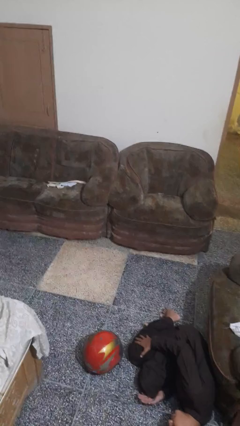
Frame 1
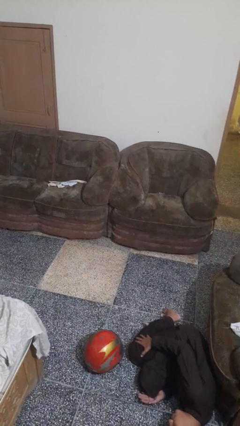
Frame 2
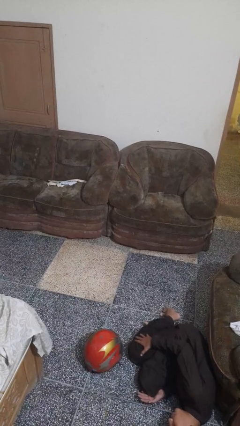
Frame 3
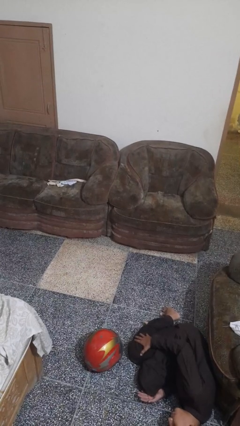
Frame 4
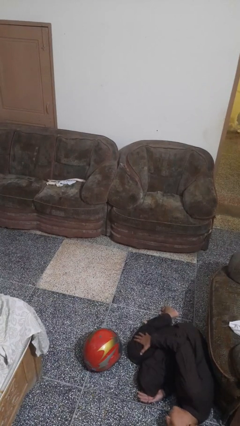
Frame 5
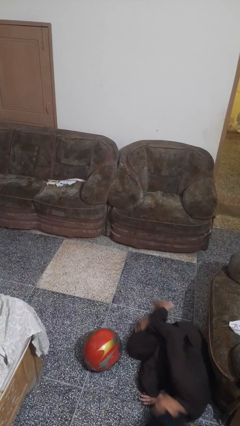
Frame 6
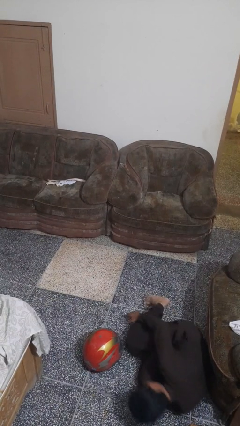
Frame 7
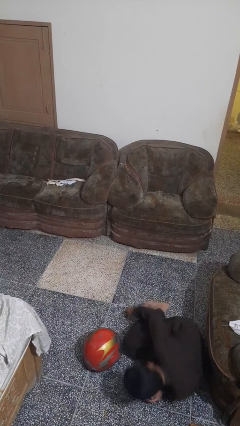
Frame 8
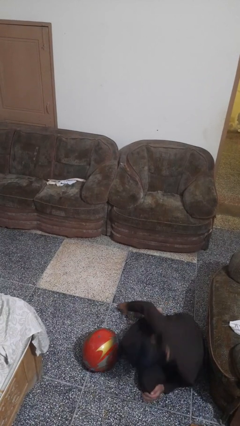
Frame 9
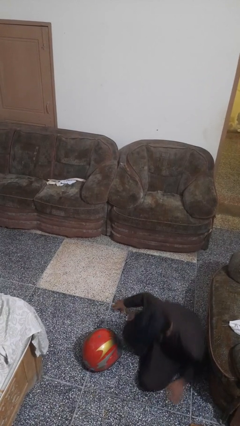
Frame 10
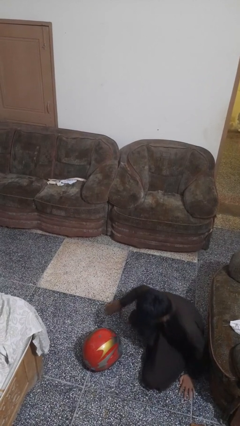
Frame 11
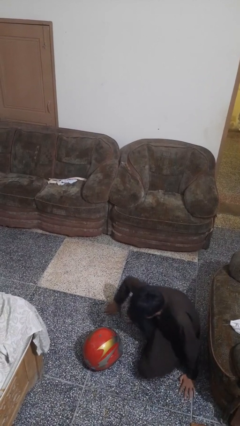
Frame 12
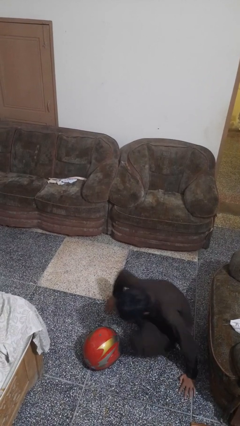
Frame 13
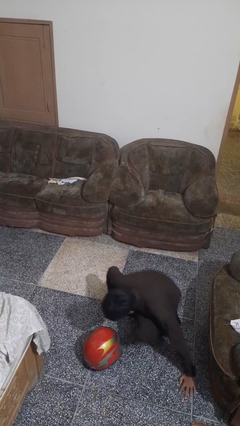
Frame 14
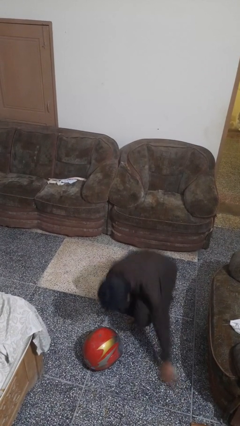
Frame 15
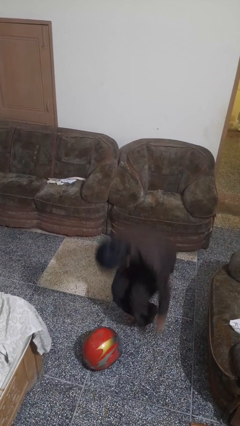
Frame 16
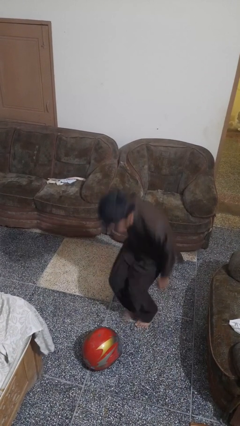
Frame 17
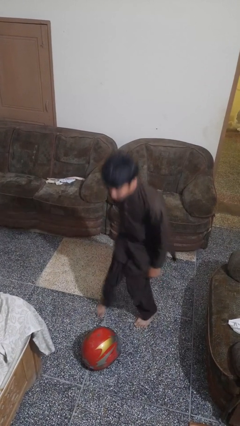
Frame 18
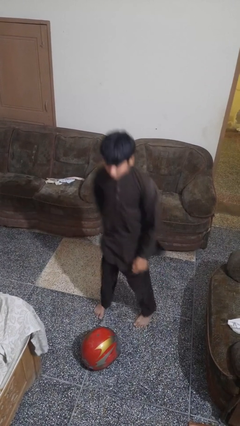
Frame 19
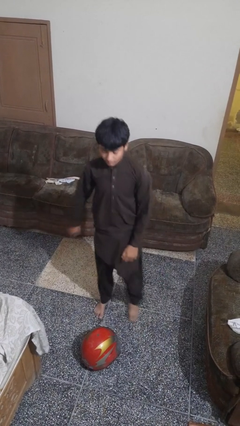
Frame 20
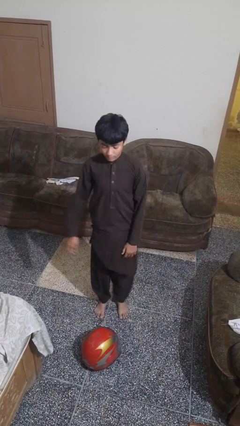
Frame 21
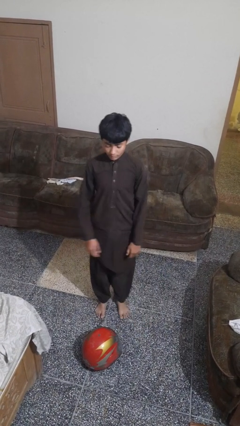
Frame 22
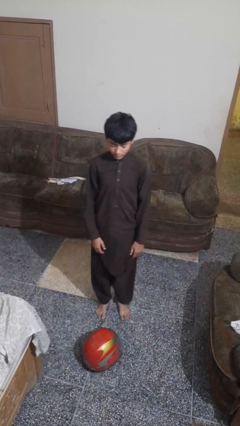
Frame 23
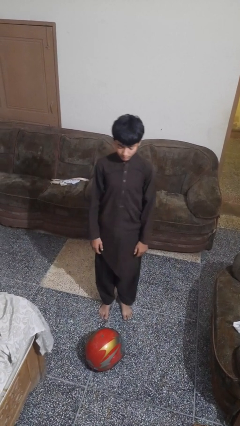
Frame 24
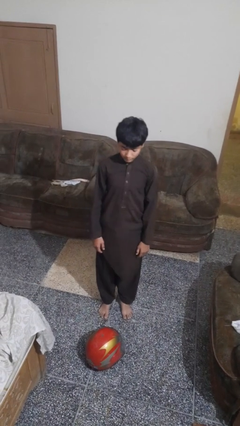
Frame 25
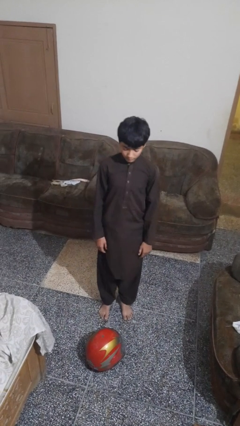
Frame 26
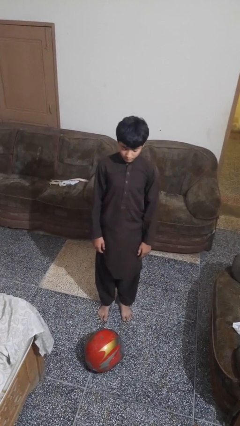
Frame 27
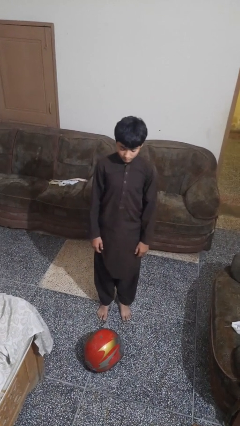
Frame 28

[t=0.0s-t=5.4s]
person stands up from floor

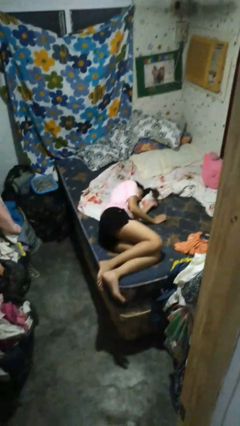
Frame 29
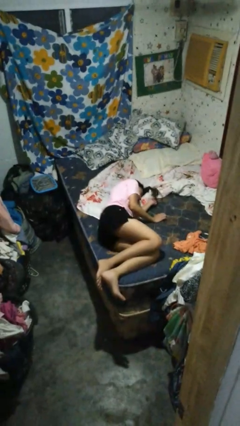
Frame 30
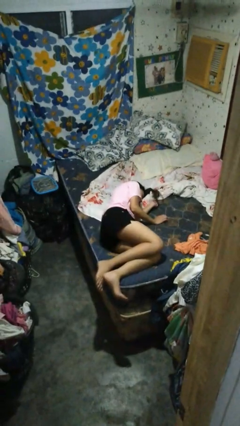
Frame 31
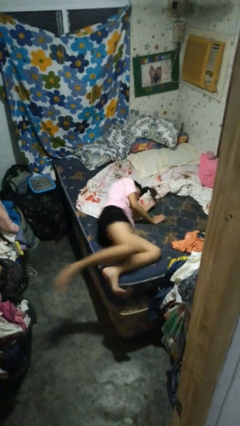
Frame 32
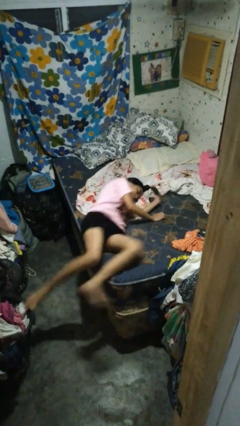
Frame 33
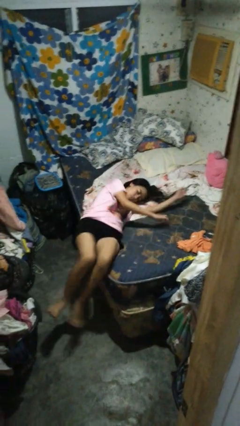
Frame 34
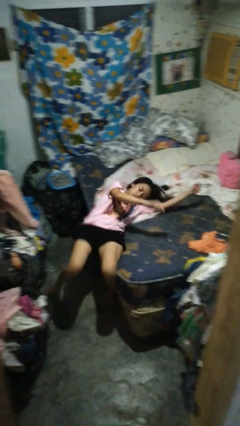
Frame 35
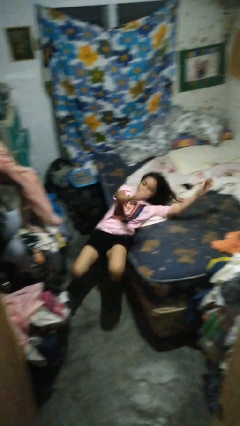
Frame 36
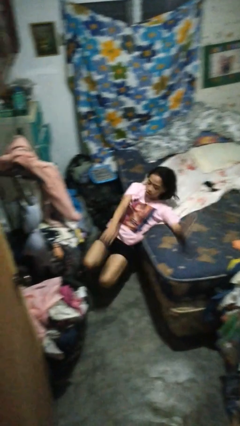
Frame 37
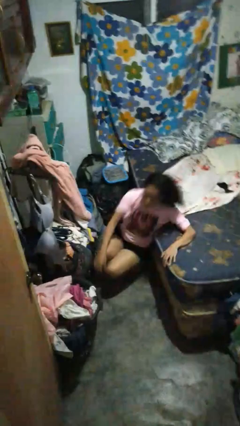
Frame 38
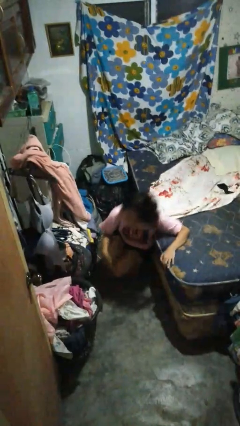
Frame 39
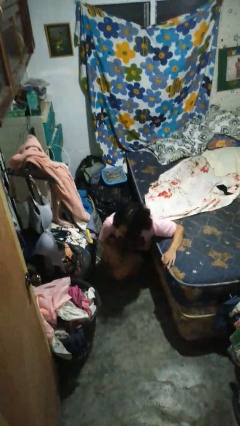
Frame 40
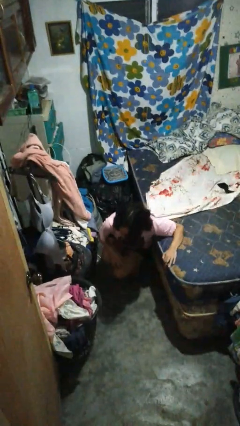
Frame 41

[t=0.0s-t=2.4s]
person falls from bed

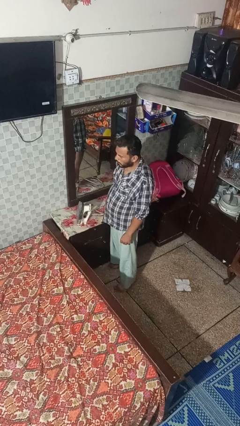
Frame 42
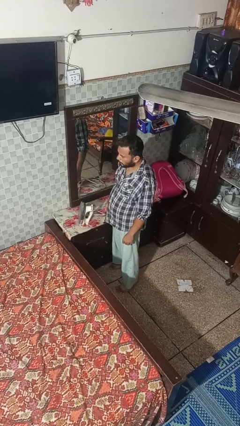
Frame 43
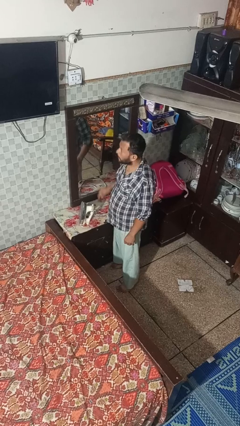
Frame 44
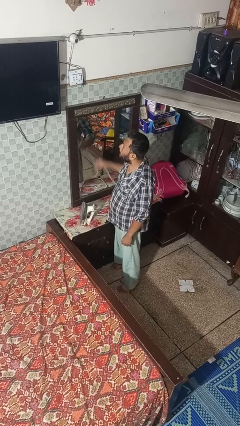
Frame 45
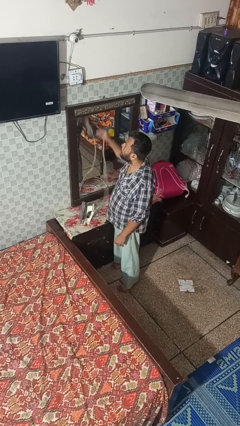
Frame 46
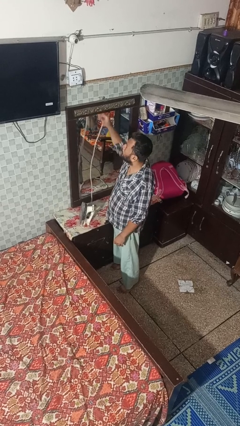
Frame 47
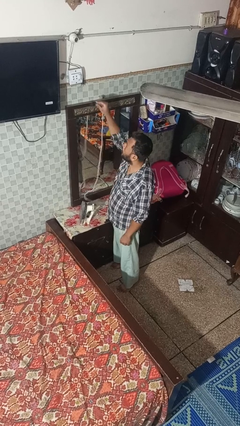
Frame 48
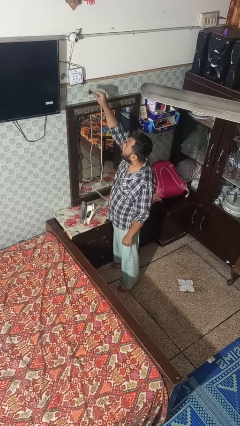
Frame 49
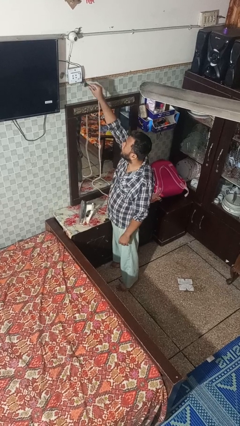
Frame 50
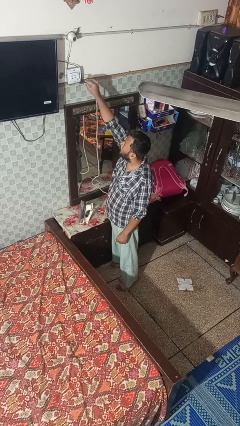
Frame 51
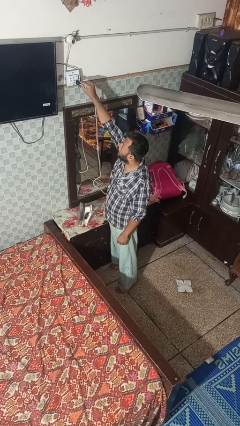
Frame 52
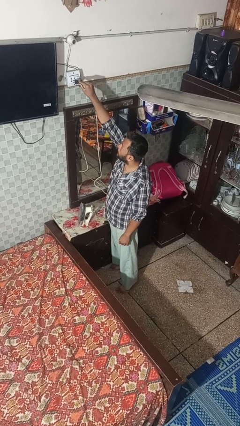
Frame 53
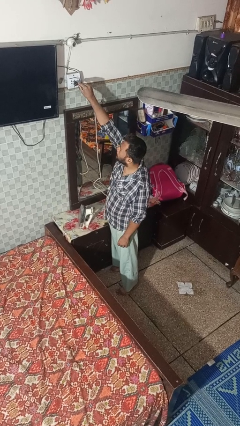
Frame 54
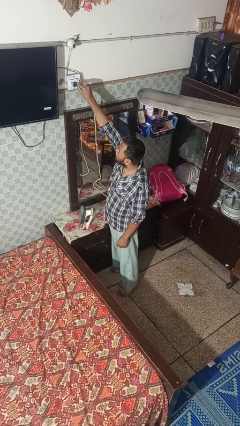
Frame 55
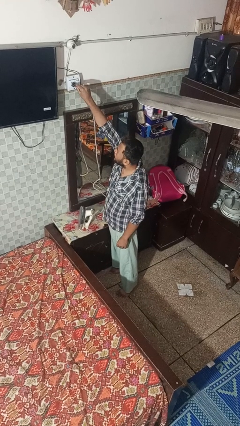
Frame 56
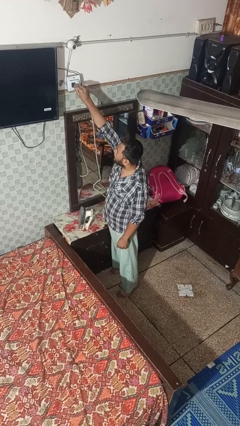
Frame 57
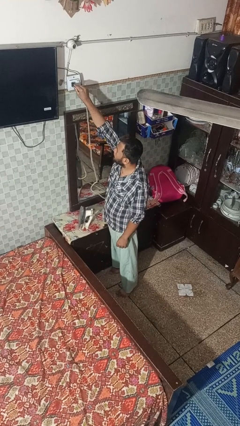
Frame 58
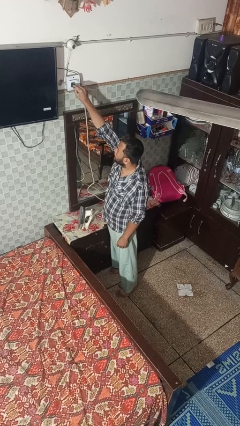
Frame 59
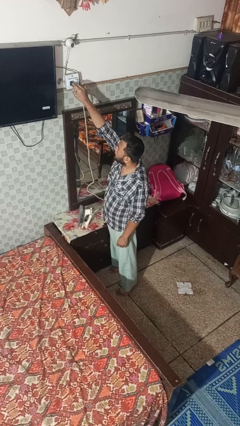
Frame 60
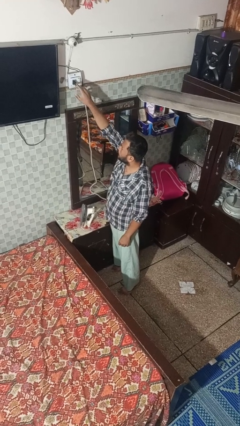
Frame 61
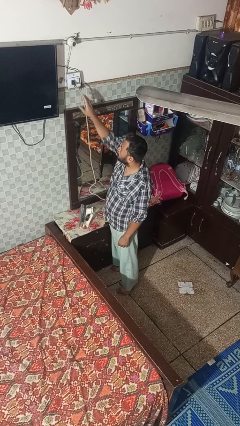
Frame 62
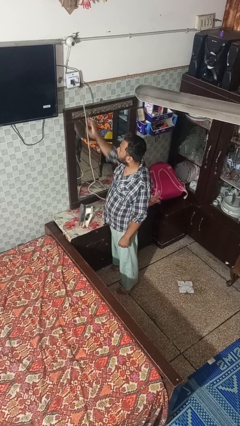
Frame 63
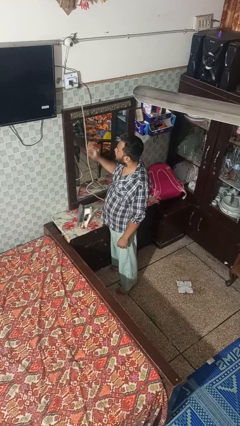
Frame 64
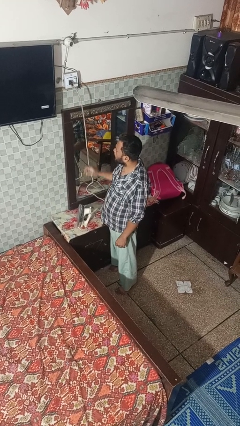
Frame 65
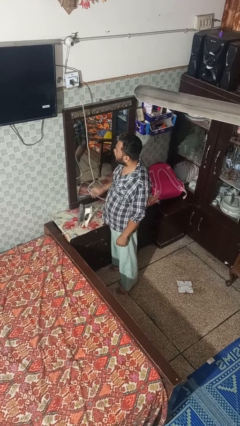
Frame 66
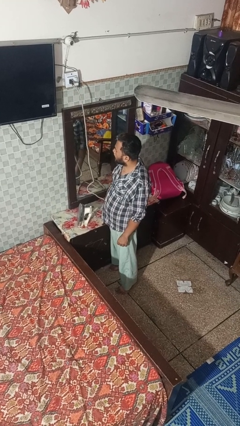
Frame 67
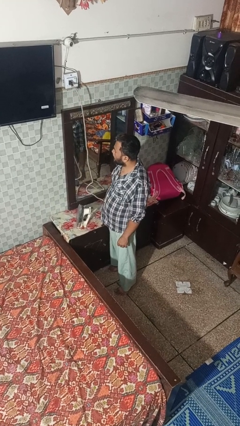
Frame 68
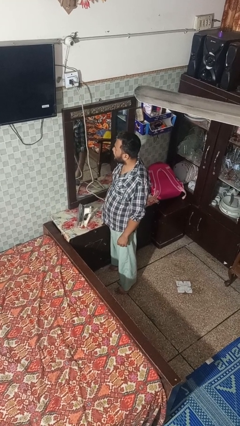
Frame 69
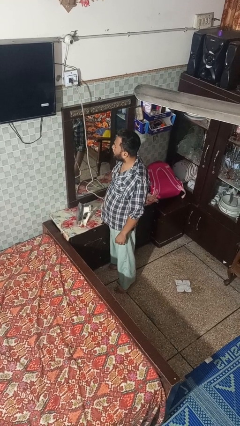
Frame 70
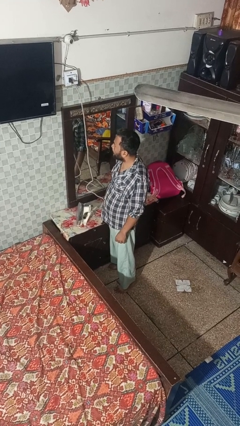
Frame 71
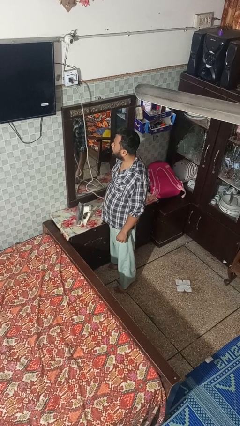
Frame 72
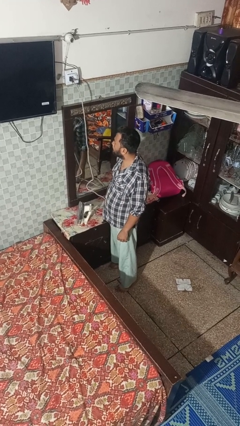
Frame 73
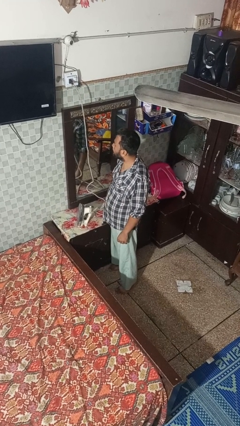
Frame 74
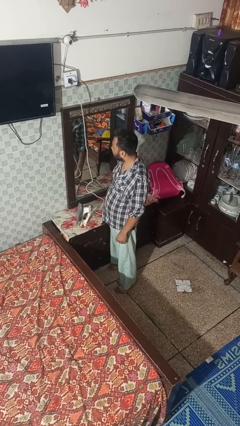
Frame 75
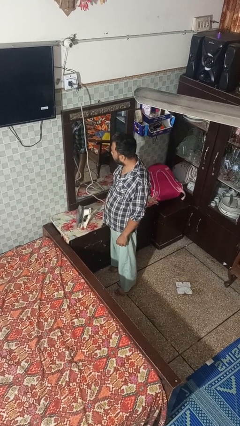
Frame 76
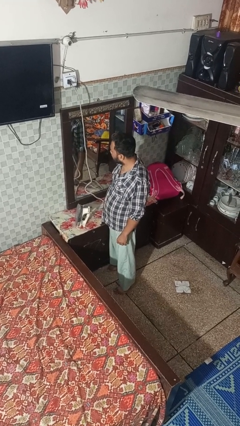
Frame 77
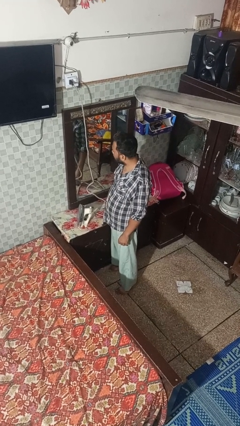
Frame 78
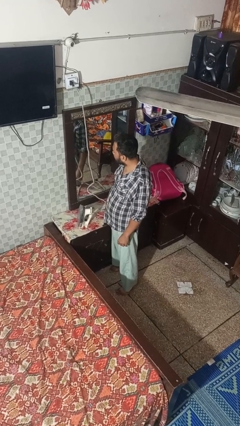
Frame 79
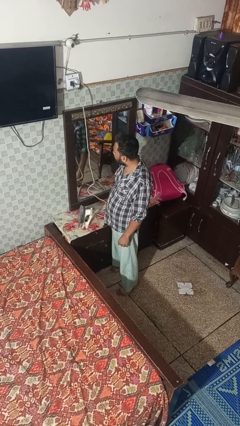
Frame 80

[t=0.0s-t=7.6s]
person plugs into electrical socket

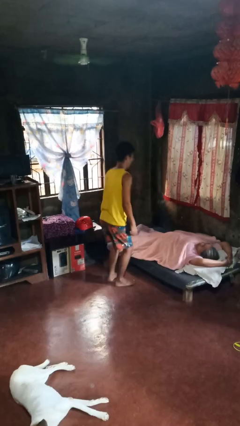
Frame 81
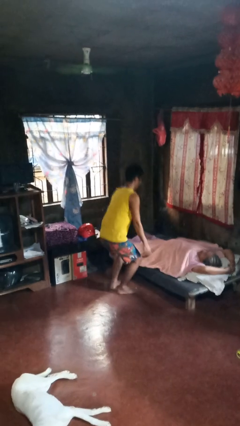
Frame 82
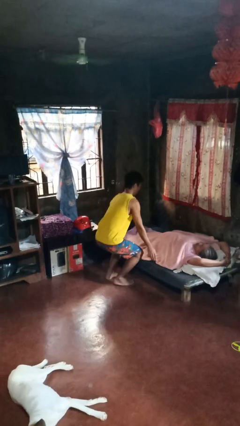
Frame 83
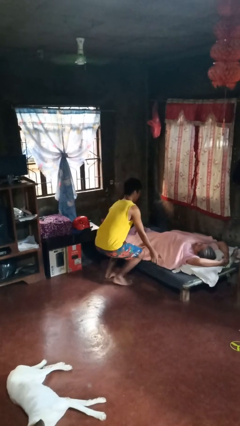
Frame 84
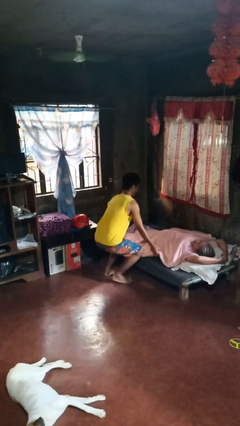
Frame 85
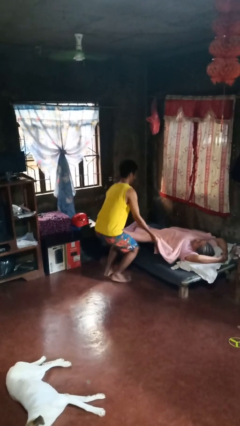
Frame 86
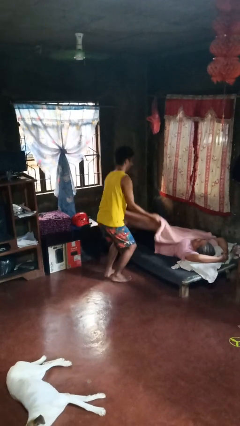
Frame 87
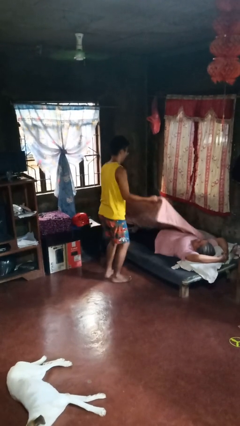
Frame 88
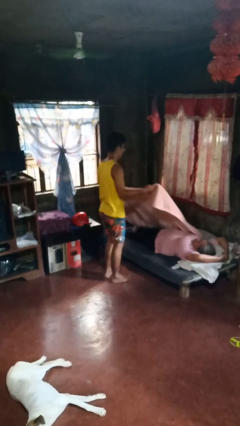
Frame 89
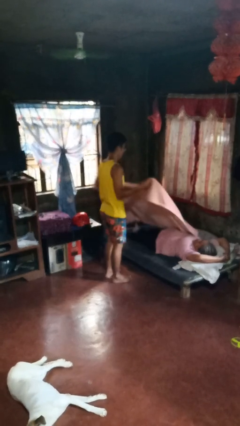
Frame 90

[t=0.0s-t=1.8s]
person uncovers friend with blanket

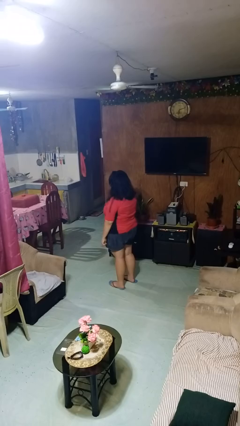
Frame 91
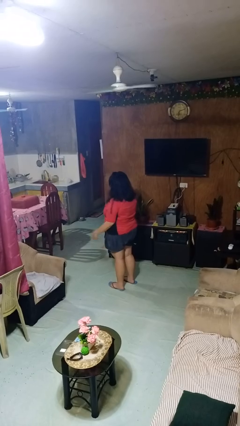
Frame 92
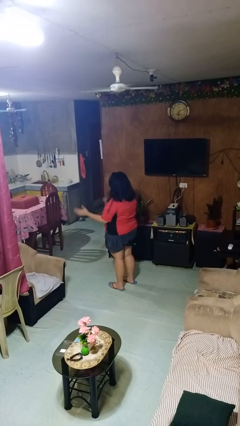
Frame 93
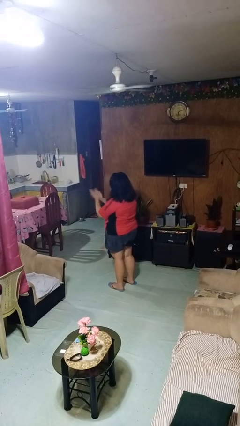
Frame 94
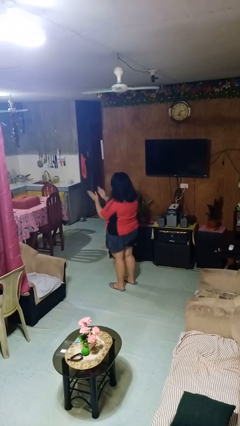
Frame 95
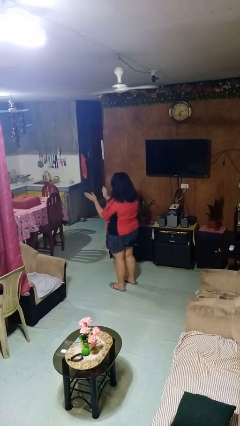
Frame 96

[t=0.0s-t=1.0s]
person claps hands
